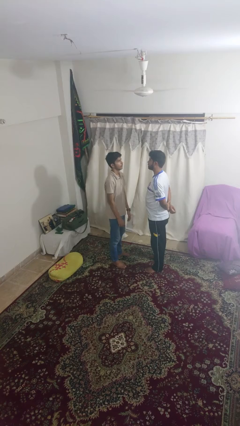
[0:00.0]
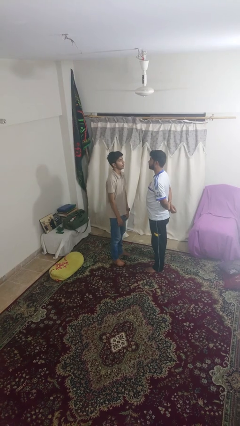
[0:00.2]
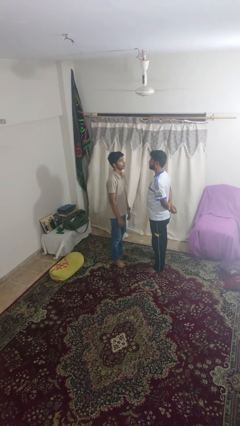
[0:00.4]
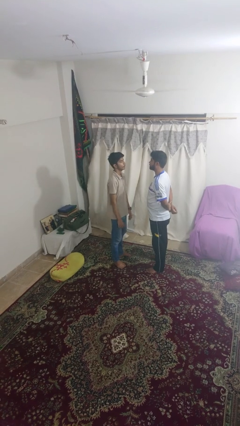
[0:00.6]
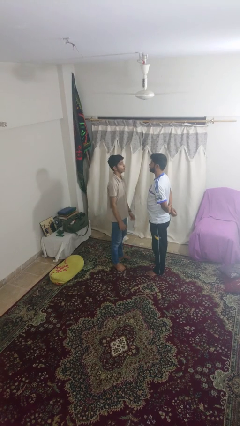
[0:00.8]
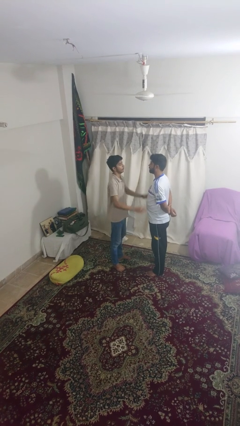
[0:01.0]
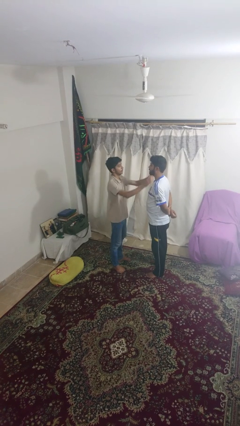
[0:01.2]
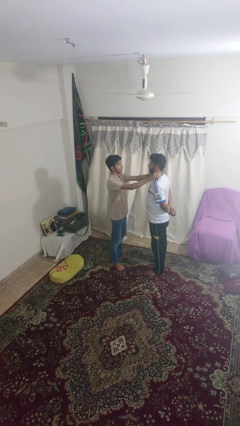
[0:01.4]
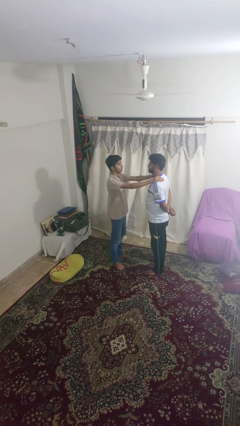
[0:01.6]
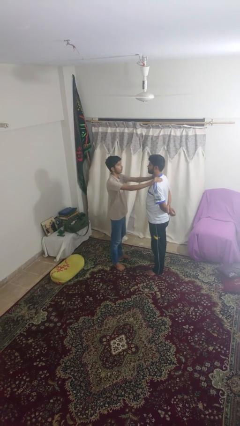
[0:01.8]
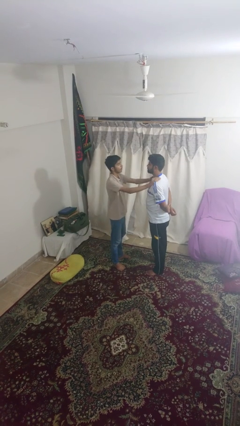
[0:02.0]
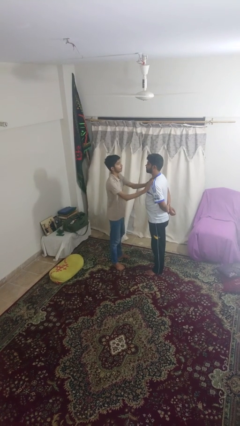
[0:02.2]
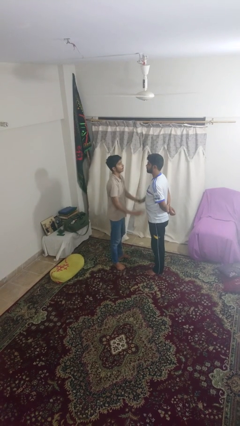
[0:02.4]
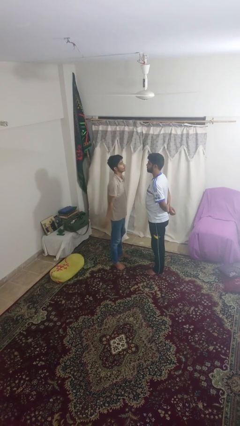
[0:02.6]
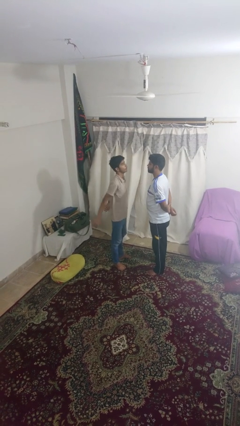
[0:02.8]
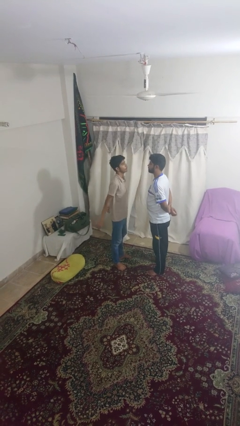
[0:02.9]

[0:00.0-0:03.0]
person pounds shoulders of person

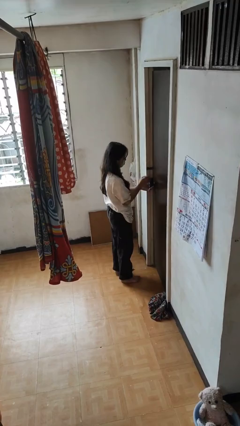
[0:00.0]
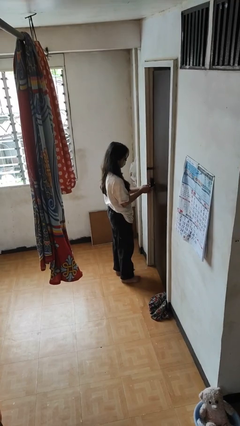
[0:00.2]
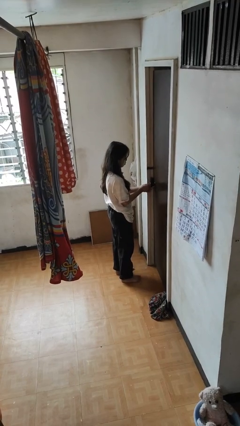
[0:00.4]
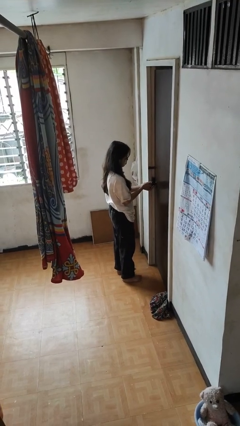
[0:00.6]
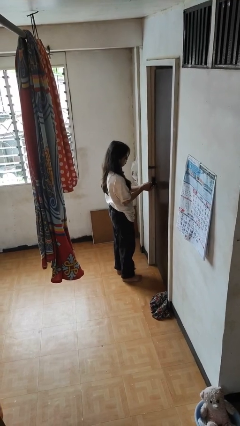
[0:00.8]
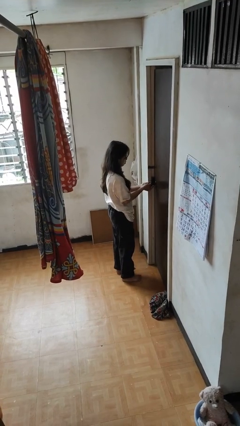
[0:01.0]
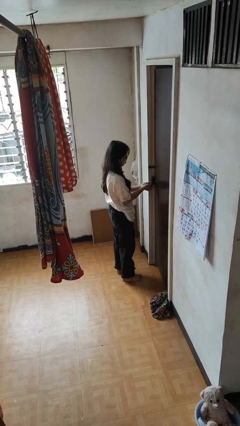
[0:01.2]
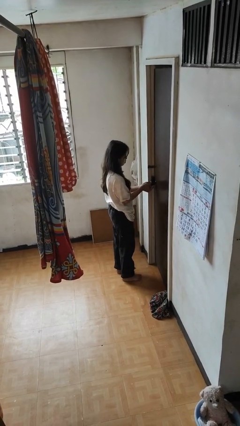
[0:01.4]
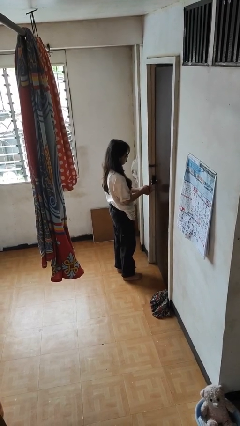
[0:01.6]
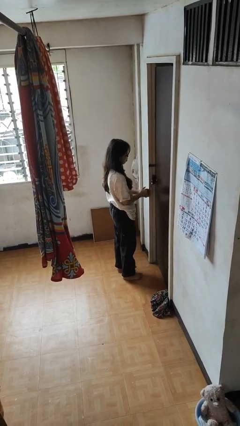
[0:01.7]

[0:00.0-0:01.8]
person locks door with keys

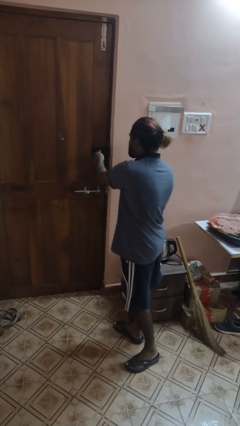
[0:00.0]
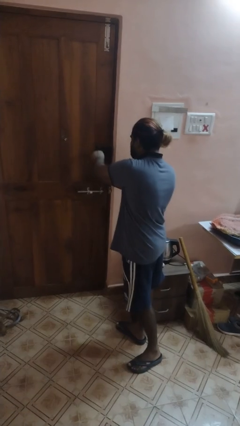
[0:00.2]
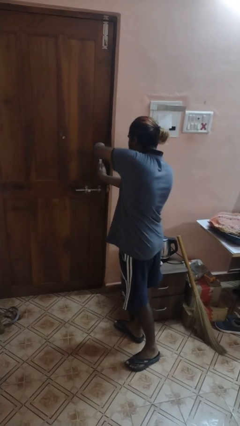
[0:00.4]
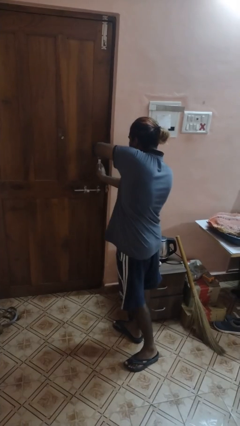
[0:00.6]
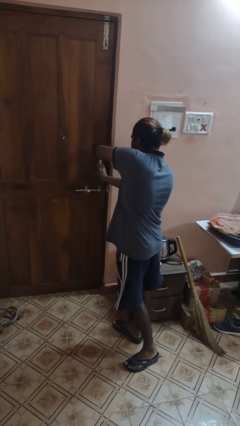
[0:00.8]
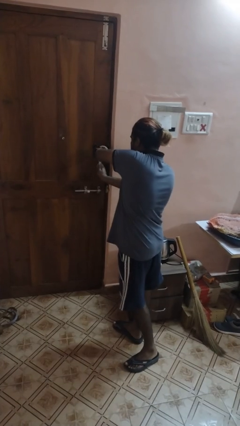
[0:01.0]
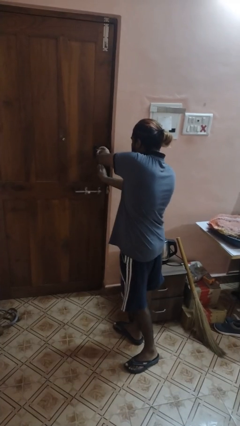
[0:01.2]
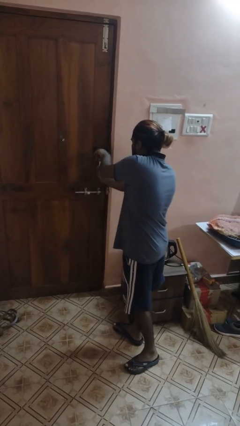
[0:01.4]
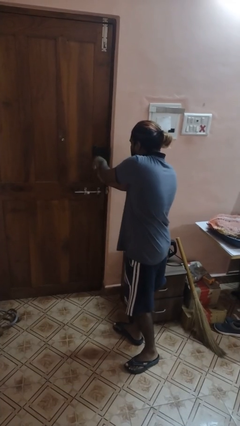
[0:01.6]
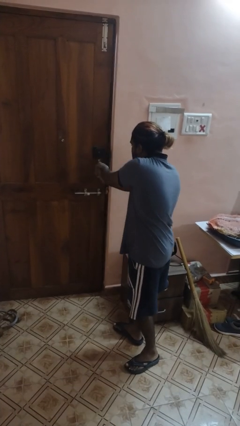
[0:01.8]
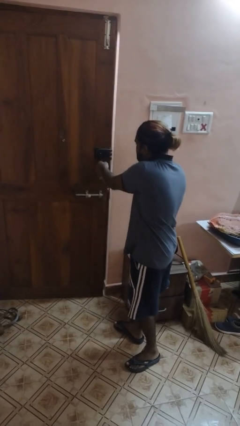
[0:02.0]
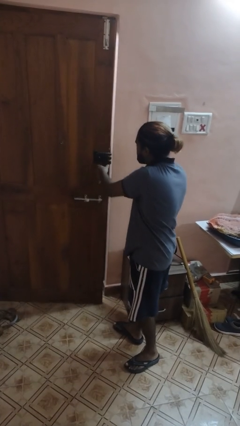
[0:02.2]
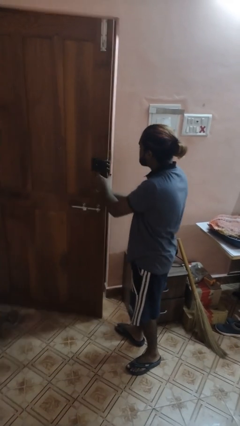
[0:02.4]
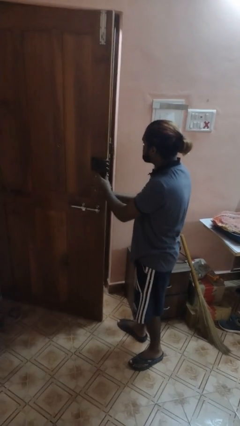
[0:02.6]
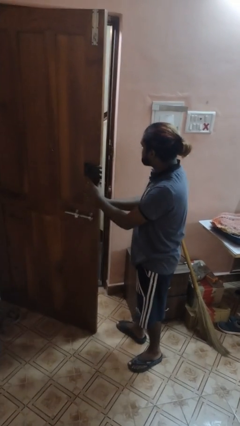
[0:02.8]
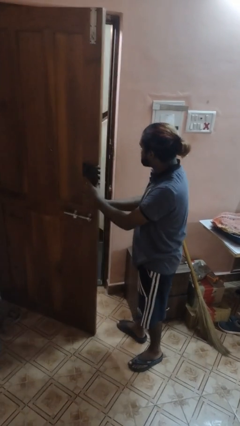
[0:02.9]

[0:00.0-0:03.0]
person unlocks door with keys

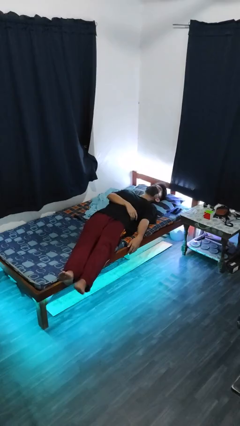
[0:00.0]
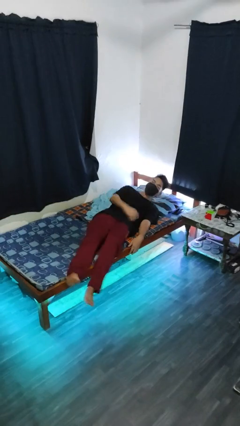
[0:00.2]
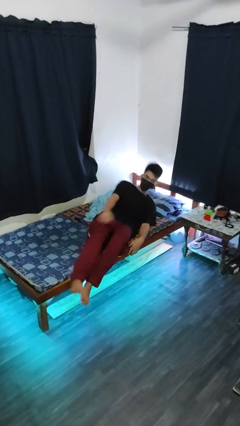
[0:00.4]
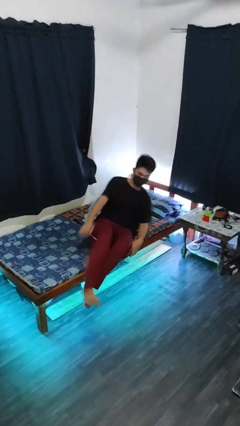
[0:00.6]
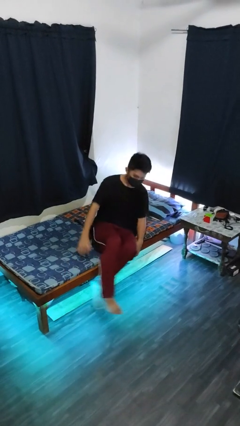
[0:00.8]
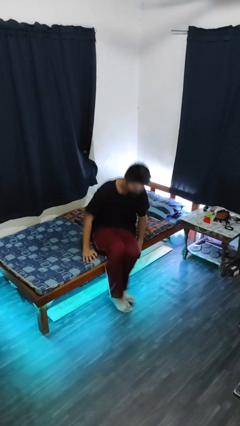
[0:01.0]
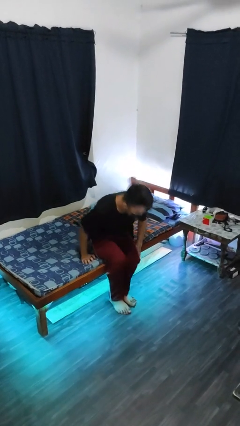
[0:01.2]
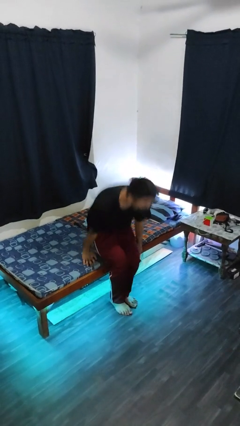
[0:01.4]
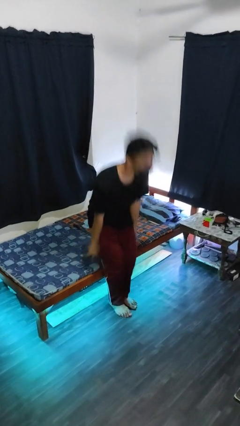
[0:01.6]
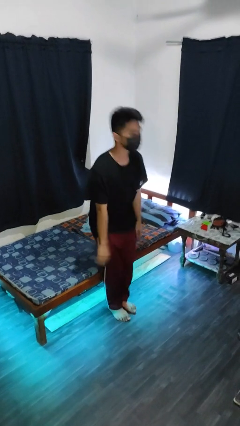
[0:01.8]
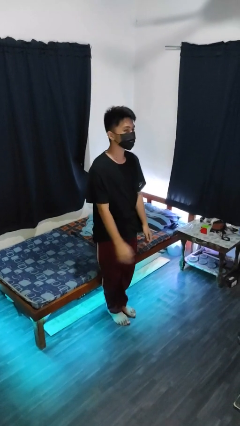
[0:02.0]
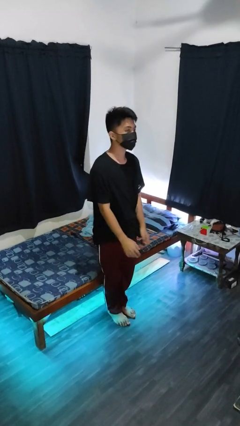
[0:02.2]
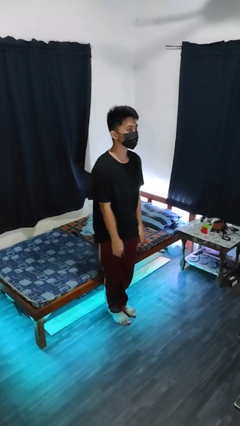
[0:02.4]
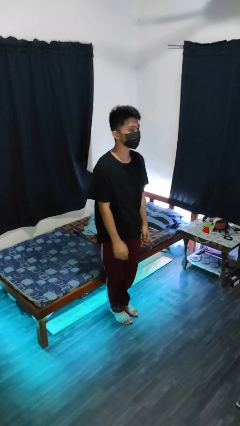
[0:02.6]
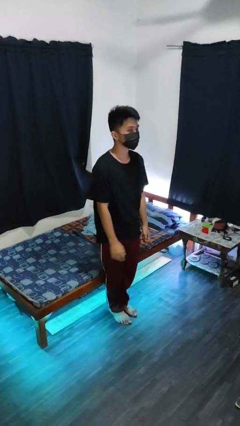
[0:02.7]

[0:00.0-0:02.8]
person stands up

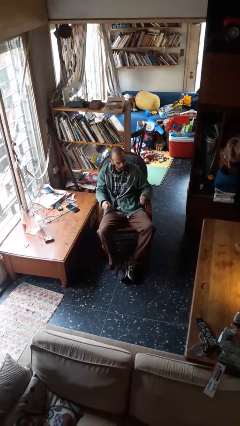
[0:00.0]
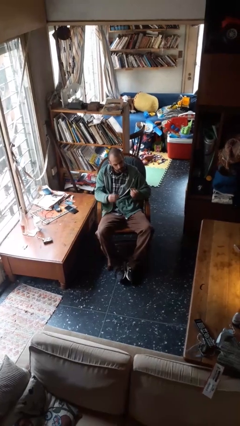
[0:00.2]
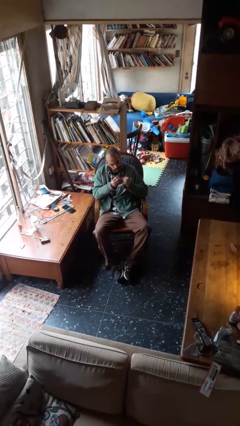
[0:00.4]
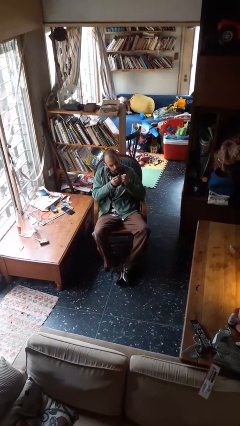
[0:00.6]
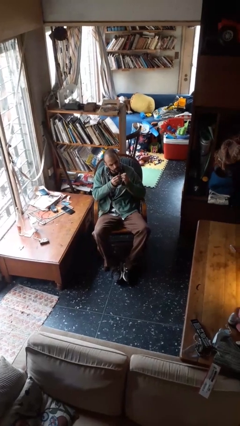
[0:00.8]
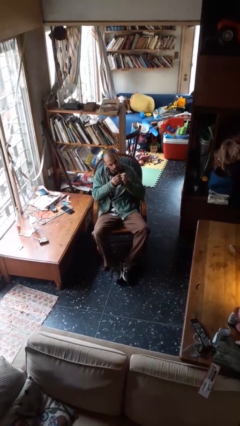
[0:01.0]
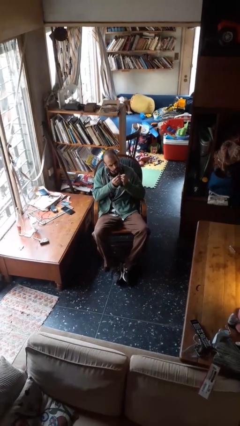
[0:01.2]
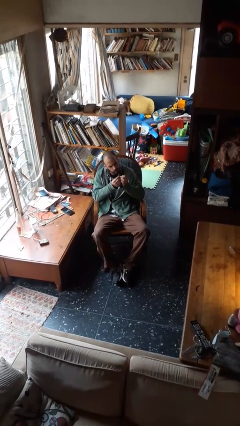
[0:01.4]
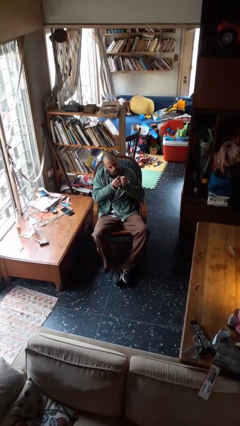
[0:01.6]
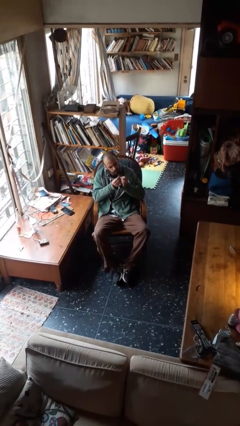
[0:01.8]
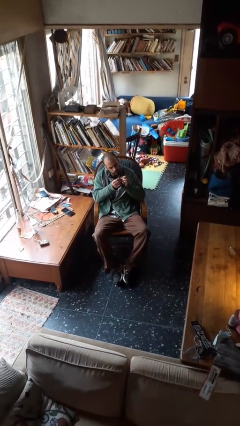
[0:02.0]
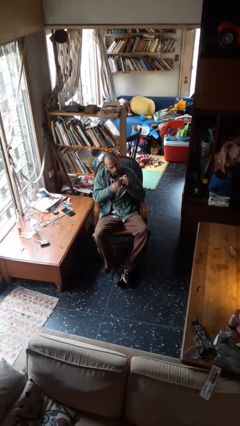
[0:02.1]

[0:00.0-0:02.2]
person files fingernails

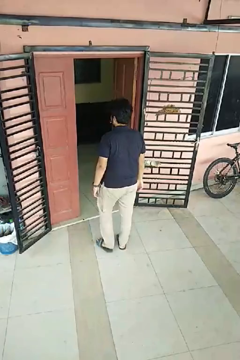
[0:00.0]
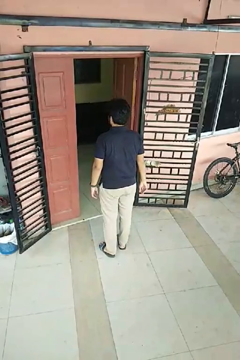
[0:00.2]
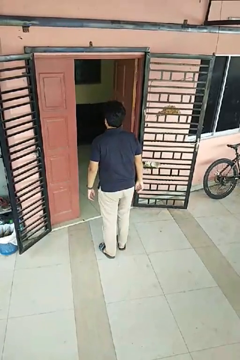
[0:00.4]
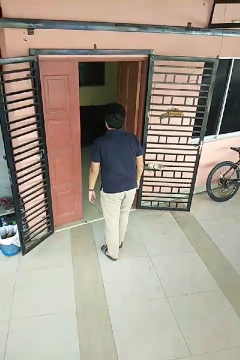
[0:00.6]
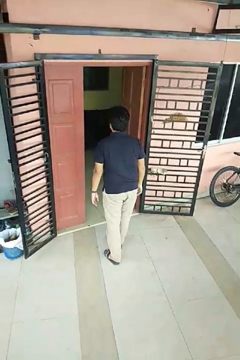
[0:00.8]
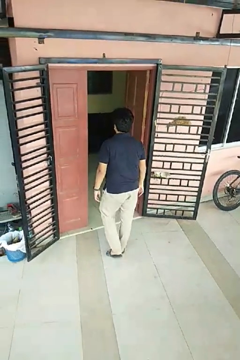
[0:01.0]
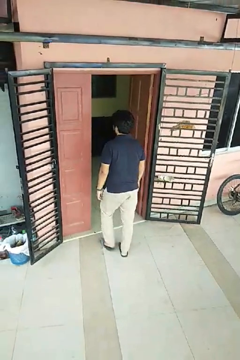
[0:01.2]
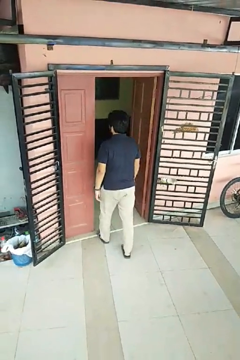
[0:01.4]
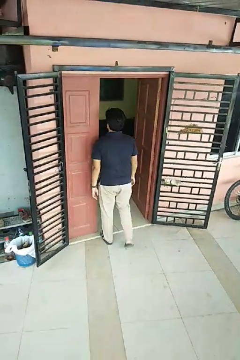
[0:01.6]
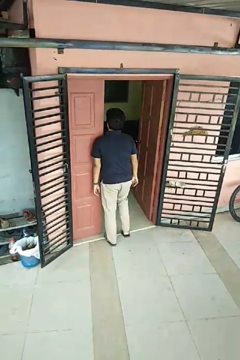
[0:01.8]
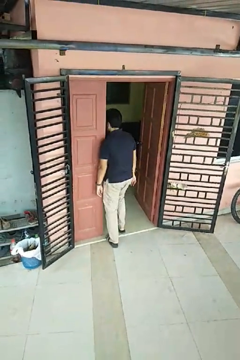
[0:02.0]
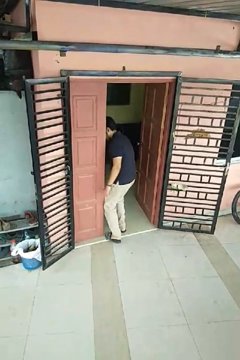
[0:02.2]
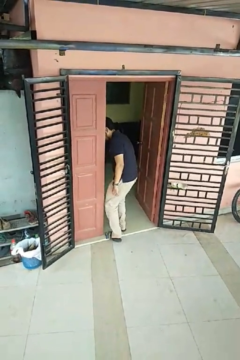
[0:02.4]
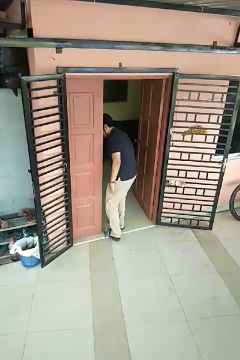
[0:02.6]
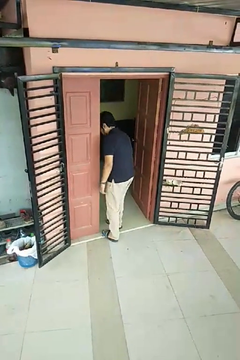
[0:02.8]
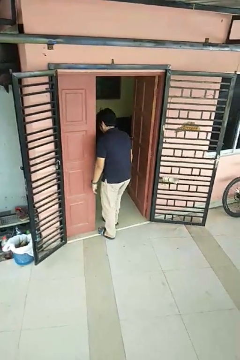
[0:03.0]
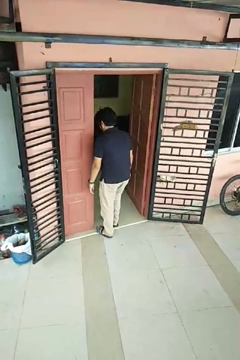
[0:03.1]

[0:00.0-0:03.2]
person bumps into wall

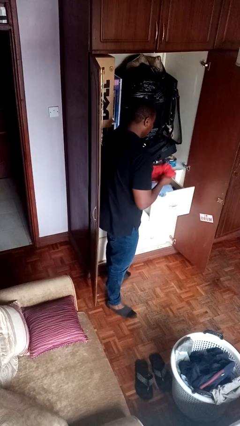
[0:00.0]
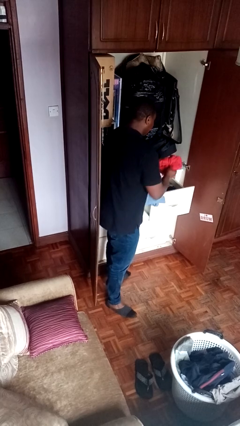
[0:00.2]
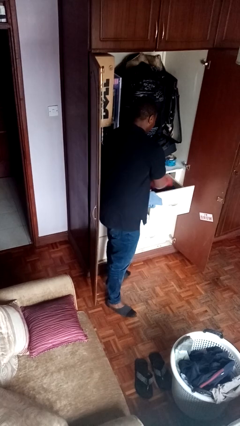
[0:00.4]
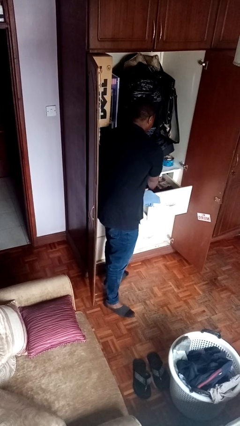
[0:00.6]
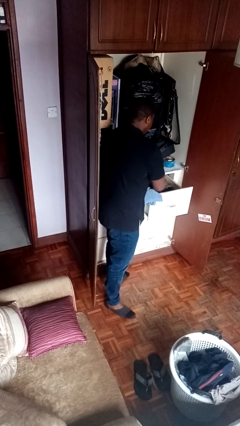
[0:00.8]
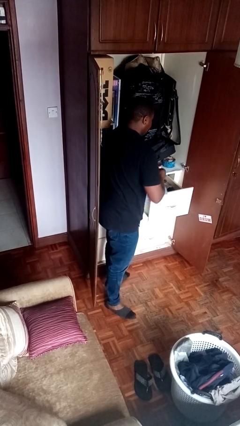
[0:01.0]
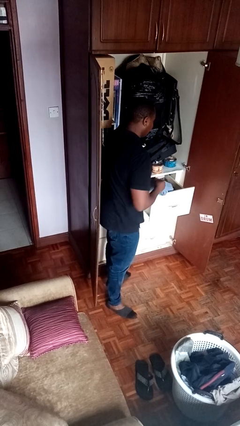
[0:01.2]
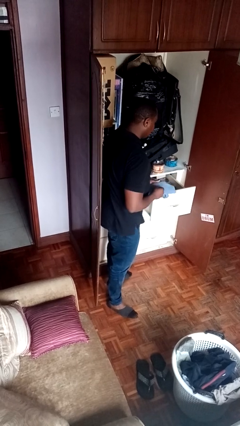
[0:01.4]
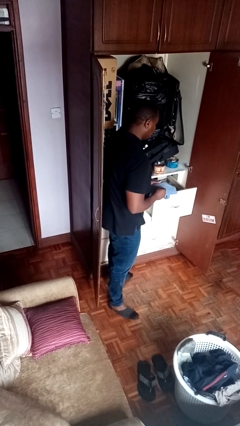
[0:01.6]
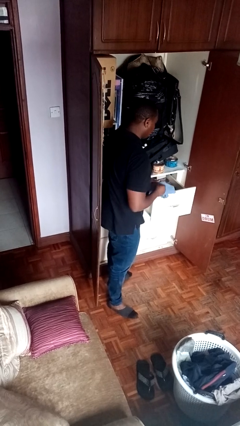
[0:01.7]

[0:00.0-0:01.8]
person puts clothes into dresser
